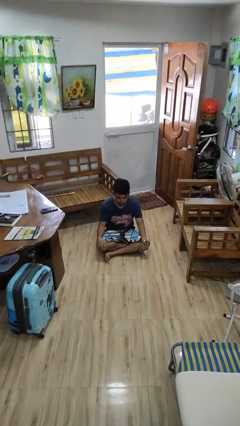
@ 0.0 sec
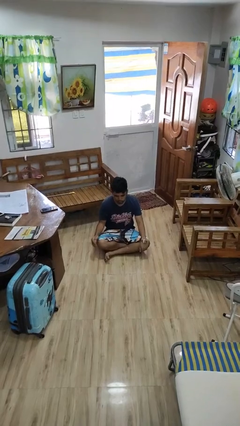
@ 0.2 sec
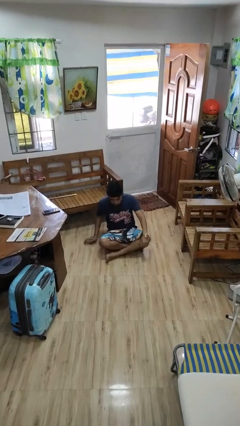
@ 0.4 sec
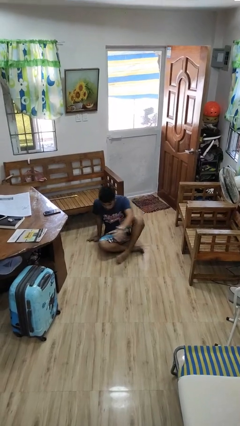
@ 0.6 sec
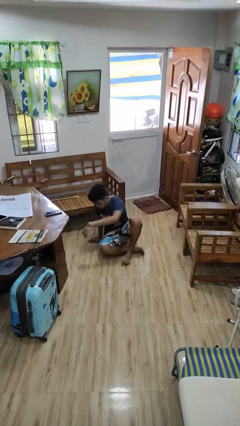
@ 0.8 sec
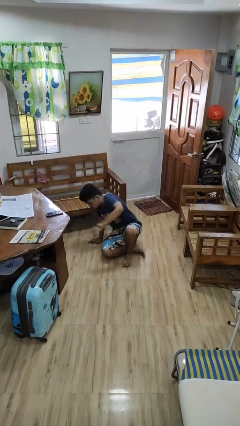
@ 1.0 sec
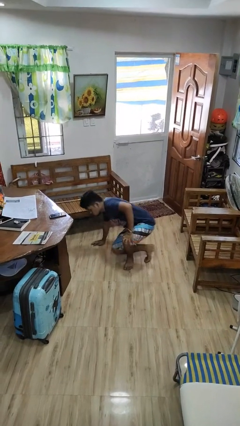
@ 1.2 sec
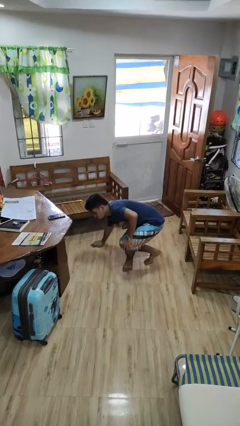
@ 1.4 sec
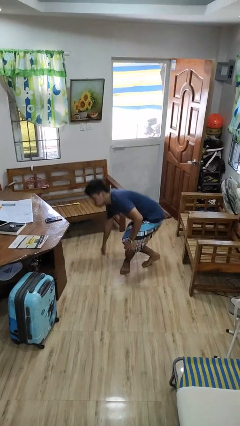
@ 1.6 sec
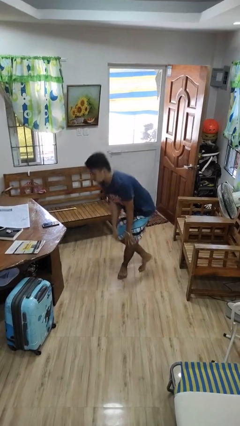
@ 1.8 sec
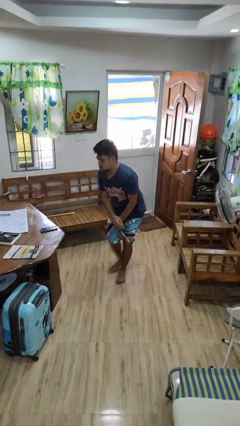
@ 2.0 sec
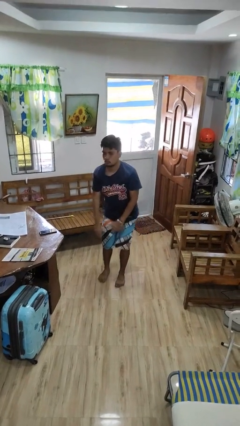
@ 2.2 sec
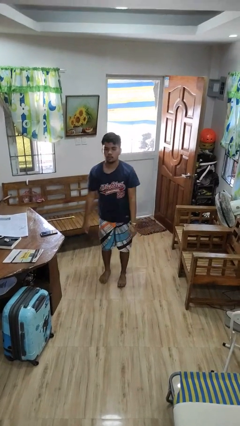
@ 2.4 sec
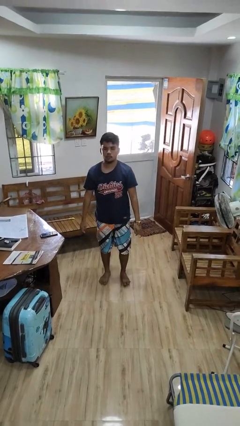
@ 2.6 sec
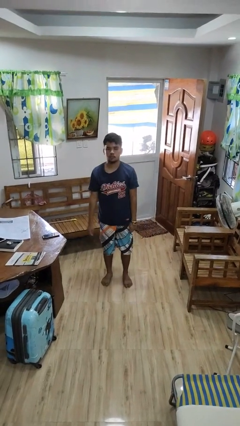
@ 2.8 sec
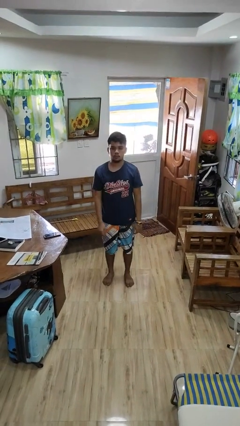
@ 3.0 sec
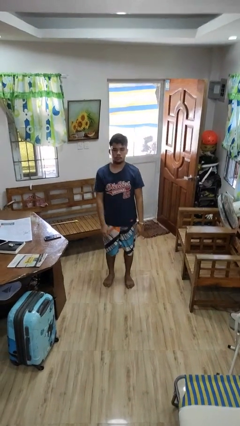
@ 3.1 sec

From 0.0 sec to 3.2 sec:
person stands up from floor

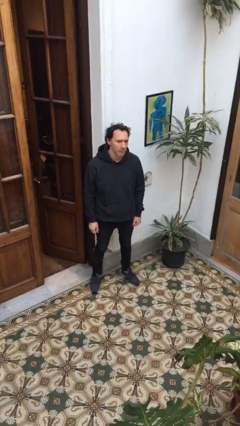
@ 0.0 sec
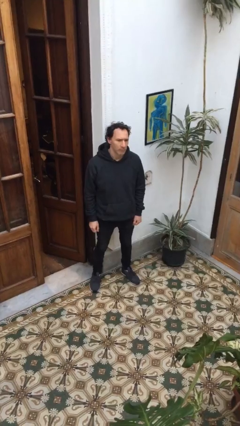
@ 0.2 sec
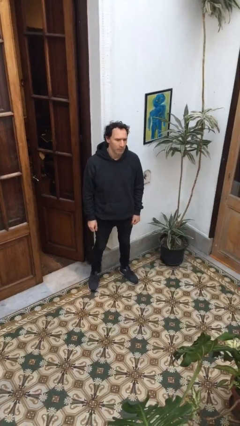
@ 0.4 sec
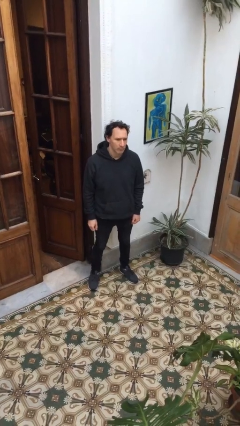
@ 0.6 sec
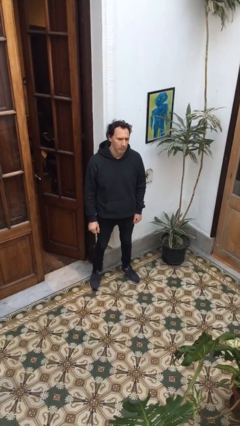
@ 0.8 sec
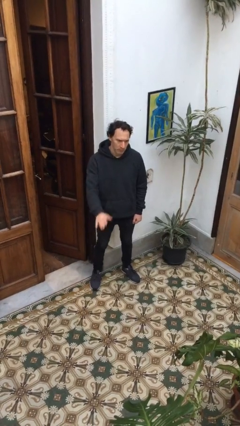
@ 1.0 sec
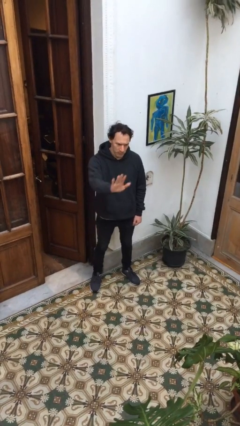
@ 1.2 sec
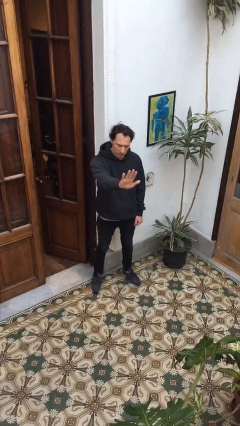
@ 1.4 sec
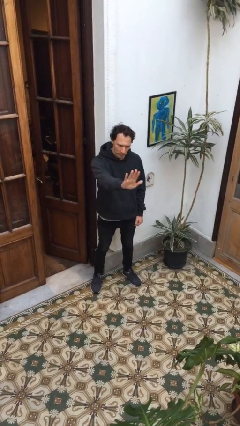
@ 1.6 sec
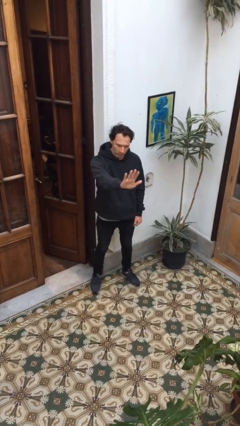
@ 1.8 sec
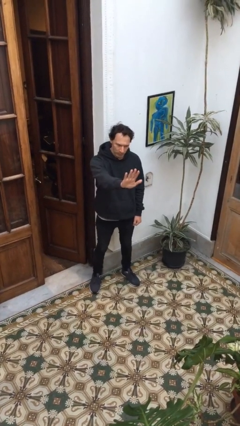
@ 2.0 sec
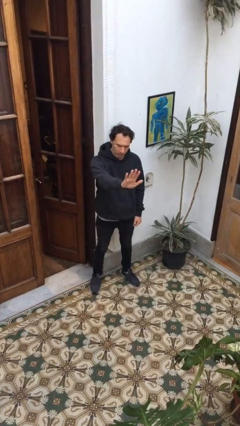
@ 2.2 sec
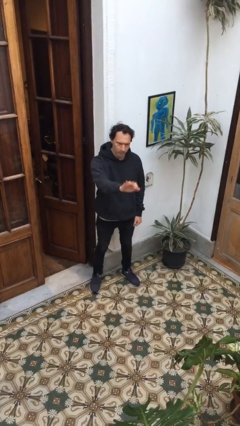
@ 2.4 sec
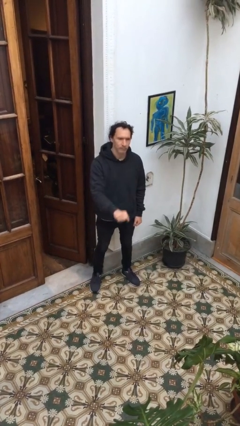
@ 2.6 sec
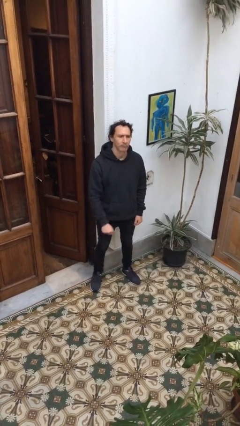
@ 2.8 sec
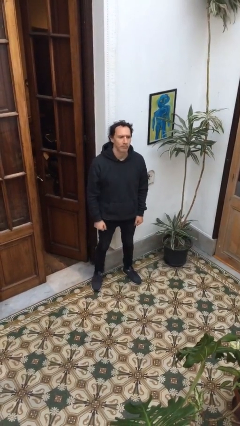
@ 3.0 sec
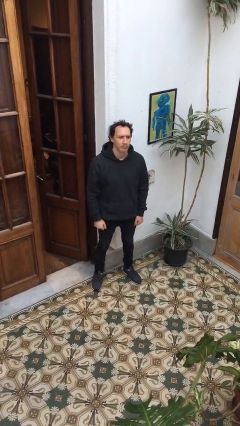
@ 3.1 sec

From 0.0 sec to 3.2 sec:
person gestures stop

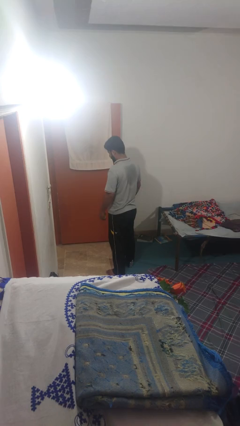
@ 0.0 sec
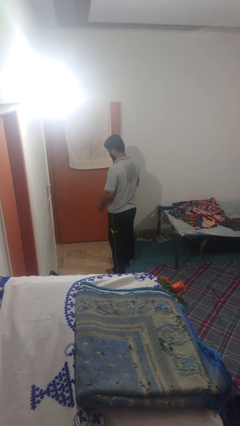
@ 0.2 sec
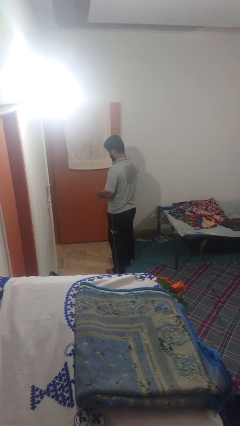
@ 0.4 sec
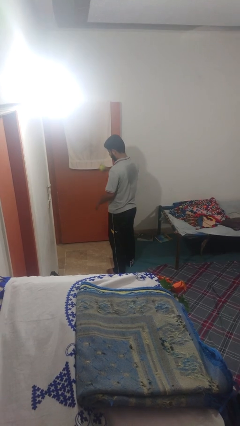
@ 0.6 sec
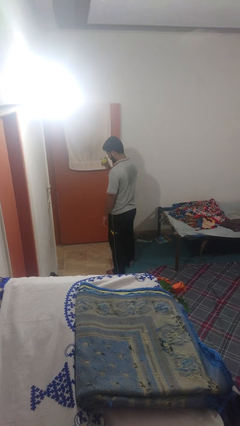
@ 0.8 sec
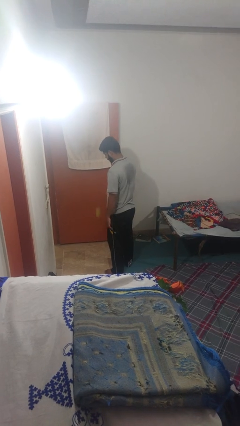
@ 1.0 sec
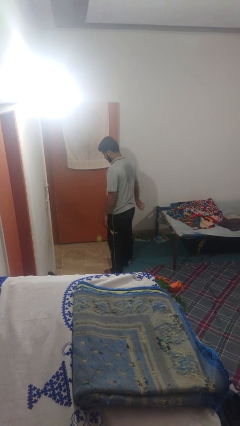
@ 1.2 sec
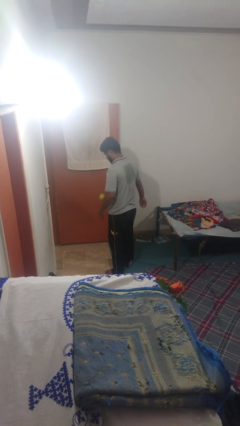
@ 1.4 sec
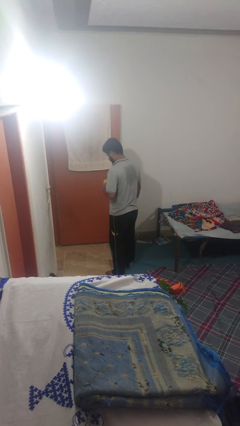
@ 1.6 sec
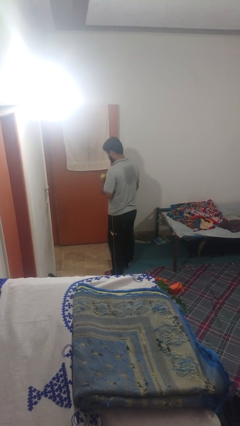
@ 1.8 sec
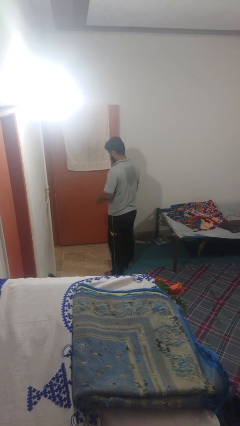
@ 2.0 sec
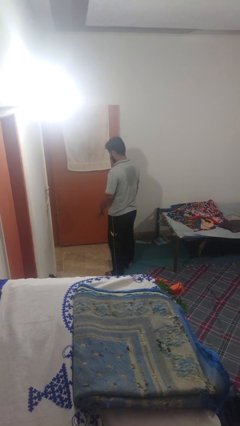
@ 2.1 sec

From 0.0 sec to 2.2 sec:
person bounces ball on floor

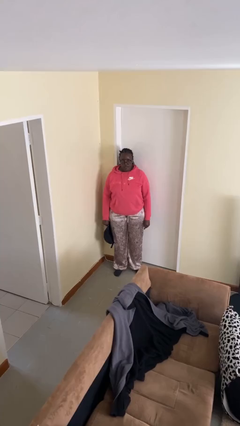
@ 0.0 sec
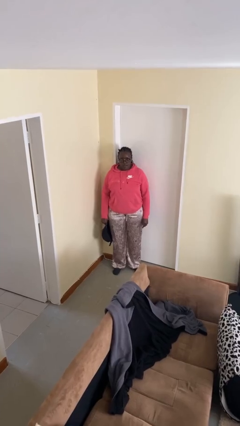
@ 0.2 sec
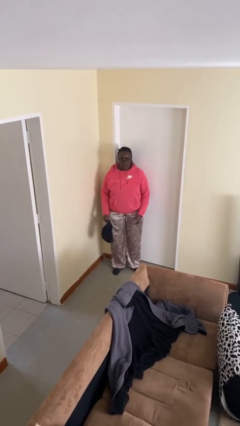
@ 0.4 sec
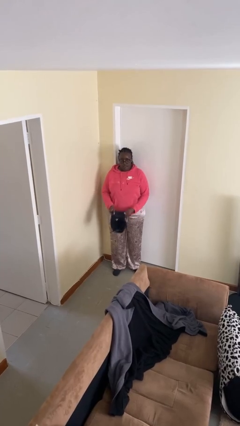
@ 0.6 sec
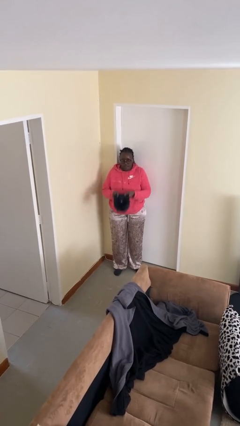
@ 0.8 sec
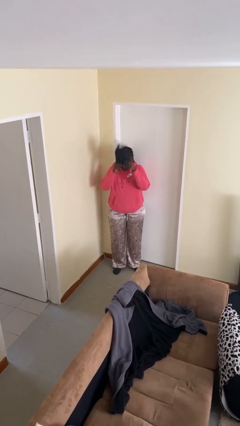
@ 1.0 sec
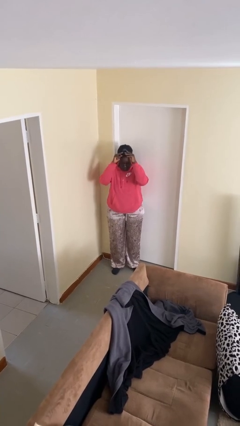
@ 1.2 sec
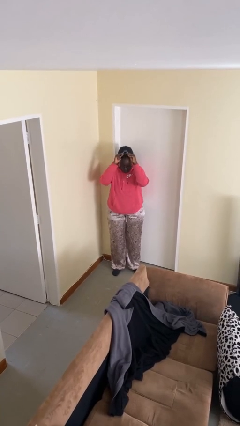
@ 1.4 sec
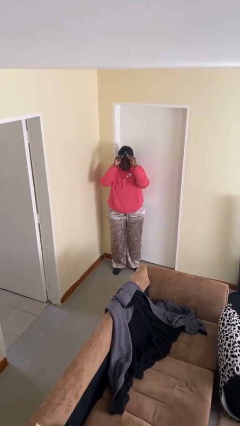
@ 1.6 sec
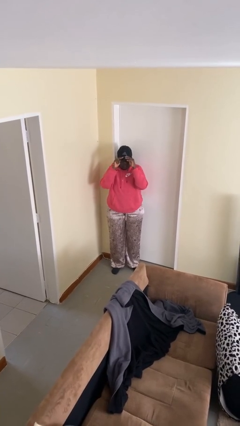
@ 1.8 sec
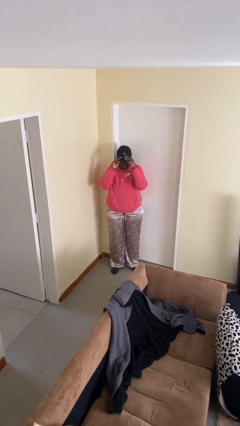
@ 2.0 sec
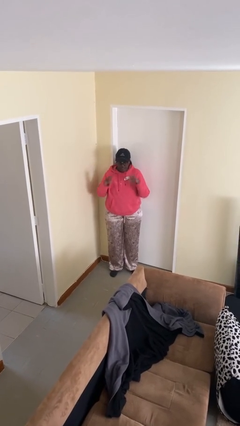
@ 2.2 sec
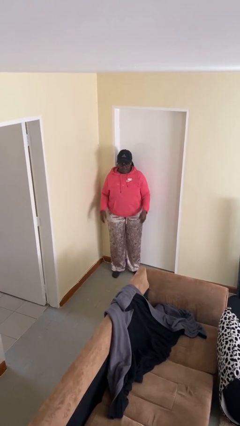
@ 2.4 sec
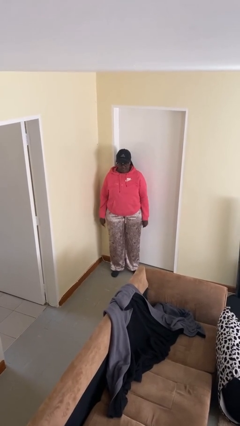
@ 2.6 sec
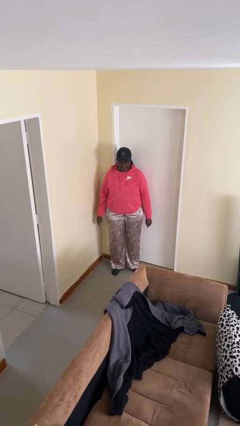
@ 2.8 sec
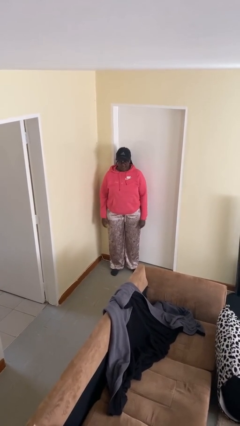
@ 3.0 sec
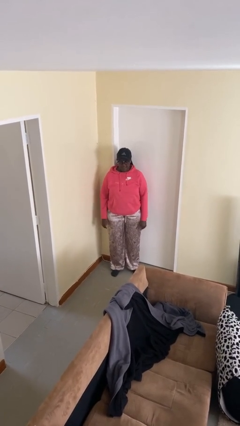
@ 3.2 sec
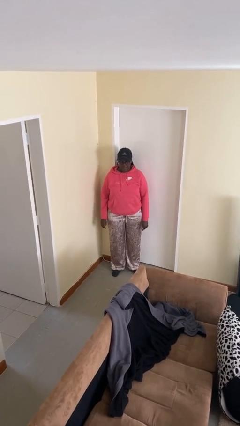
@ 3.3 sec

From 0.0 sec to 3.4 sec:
person puts on hat

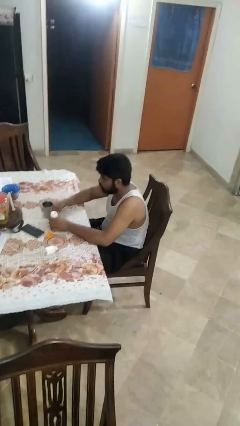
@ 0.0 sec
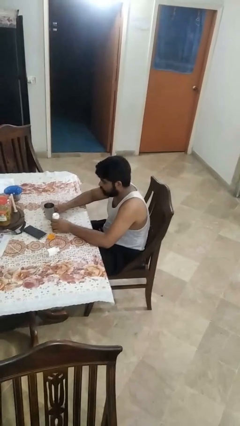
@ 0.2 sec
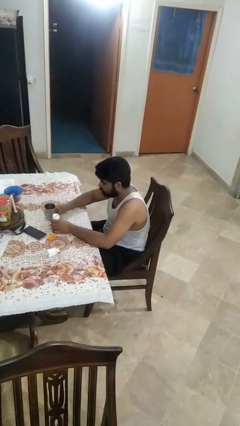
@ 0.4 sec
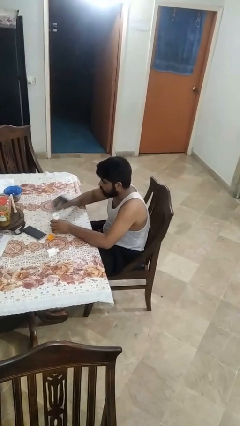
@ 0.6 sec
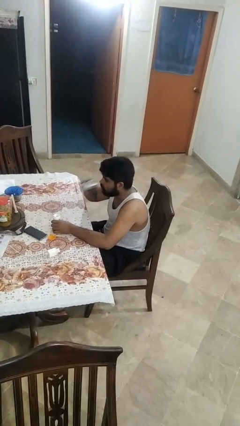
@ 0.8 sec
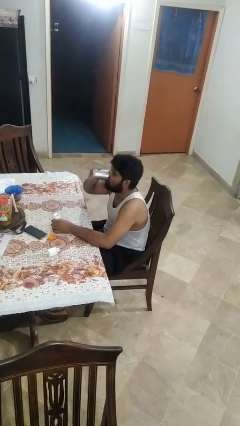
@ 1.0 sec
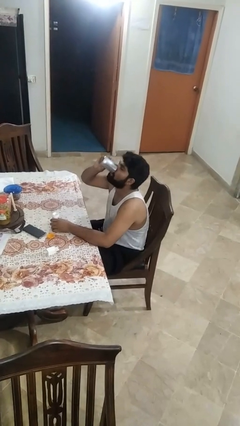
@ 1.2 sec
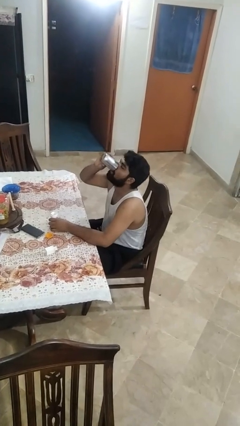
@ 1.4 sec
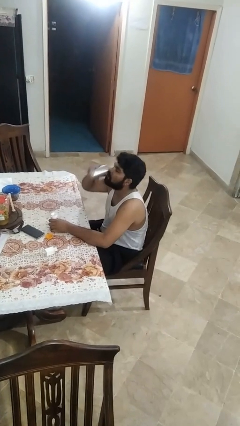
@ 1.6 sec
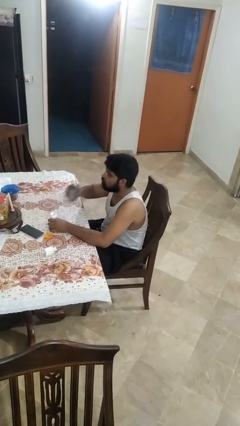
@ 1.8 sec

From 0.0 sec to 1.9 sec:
person drinks from cup

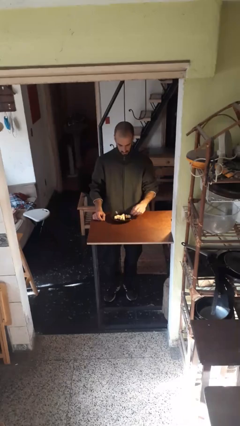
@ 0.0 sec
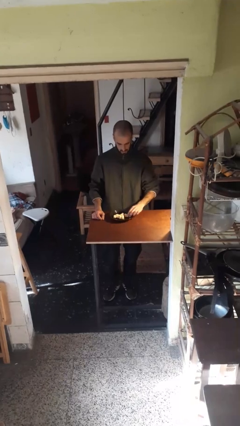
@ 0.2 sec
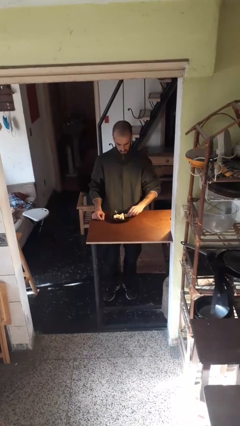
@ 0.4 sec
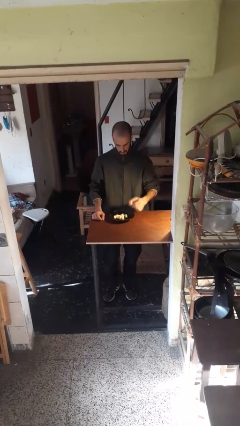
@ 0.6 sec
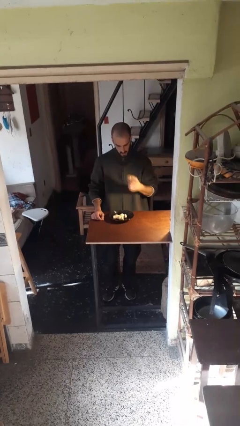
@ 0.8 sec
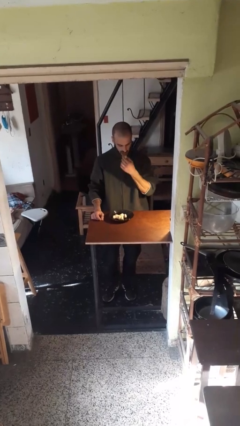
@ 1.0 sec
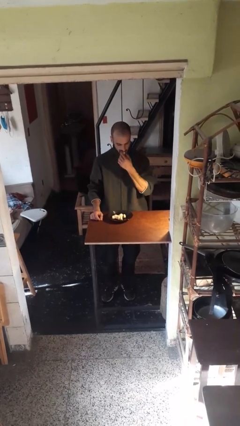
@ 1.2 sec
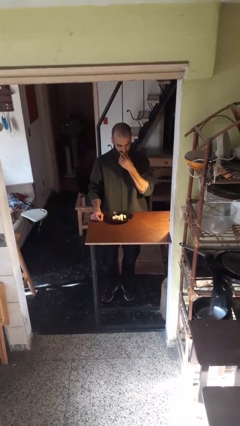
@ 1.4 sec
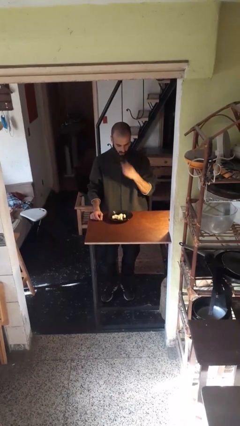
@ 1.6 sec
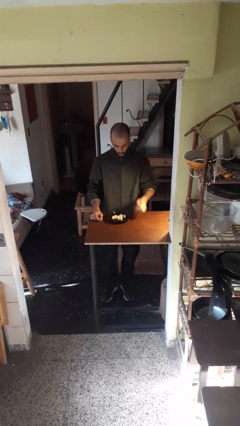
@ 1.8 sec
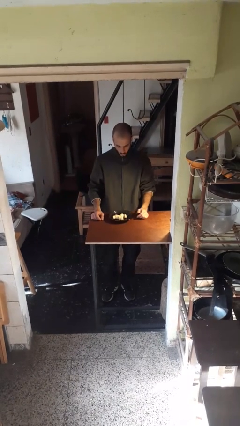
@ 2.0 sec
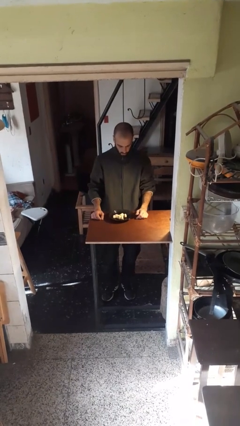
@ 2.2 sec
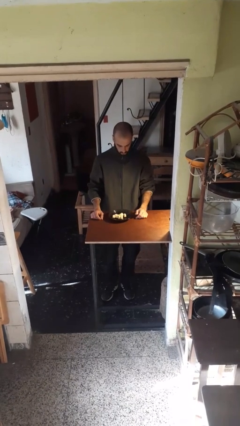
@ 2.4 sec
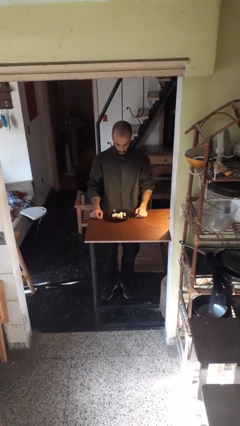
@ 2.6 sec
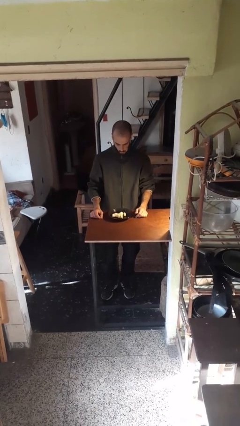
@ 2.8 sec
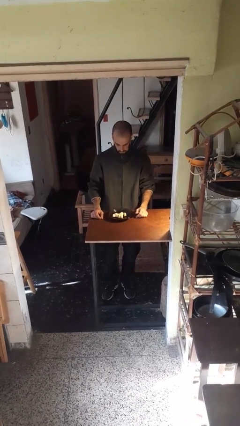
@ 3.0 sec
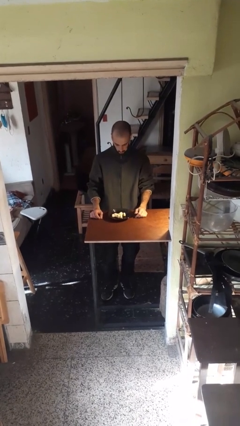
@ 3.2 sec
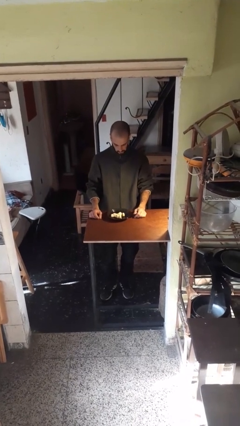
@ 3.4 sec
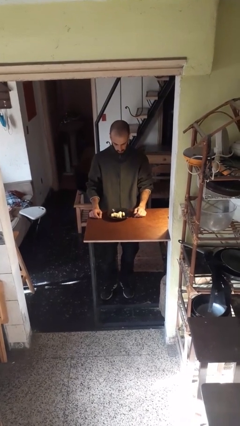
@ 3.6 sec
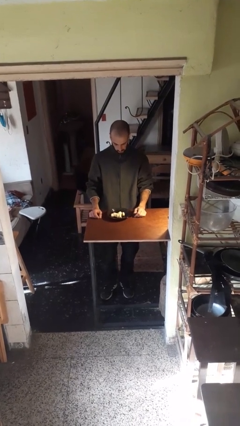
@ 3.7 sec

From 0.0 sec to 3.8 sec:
person eats with hands
